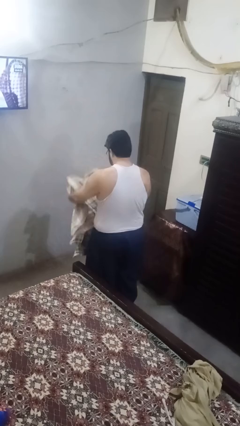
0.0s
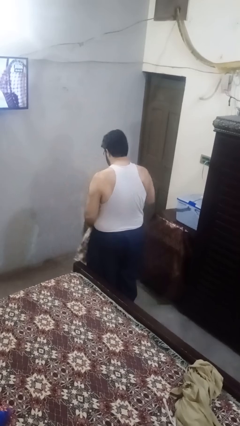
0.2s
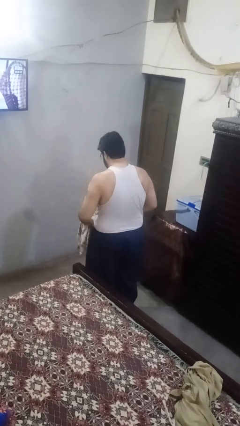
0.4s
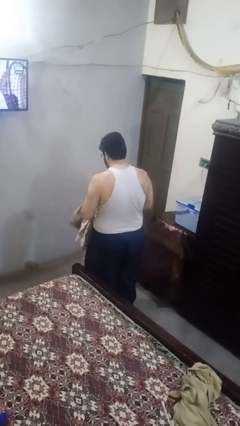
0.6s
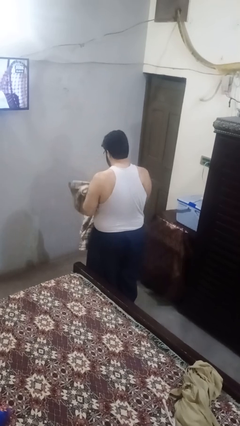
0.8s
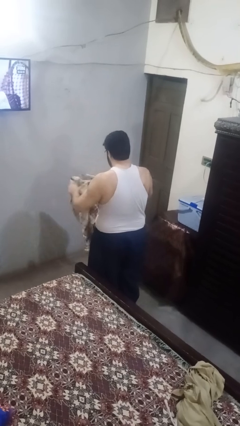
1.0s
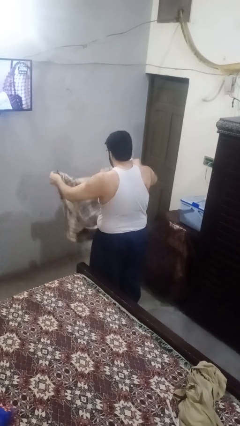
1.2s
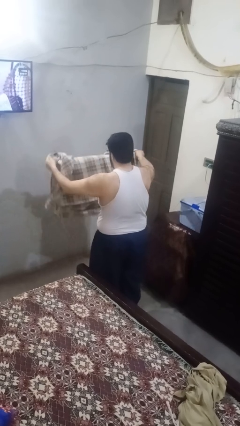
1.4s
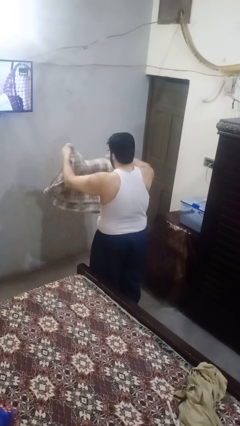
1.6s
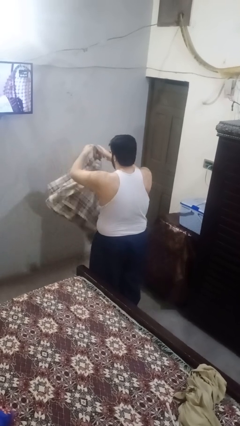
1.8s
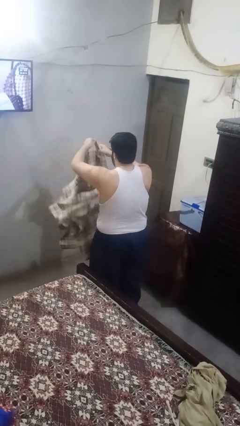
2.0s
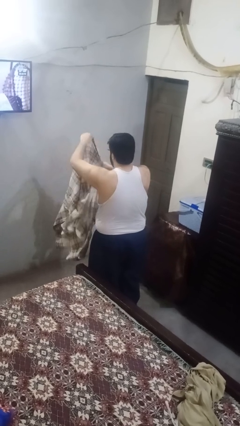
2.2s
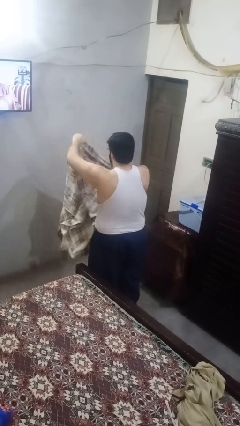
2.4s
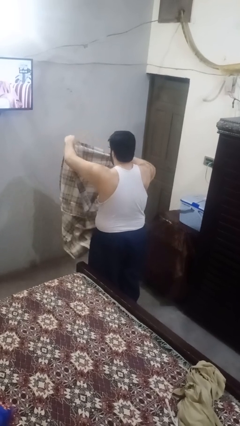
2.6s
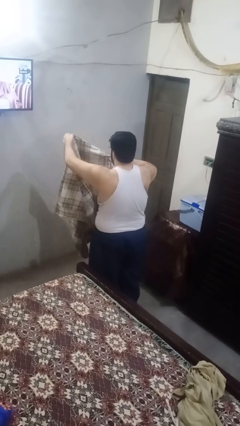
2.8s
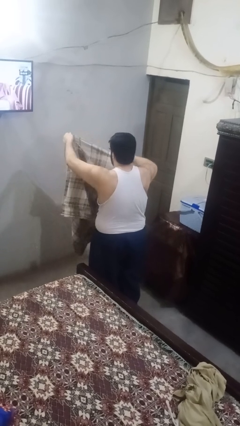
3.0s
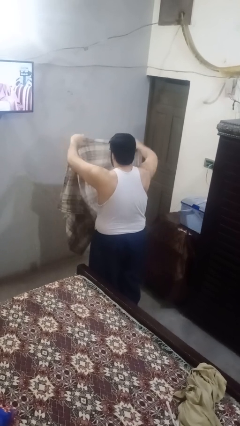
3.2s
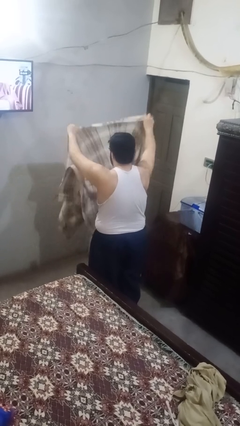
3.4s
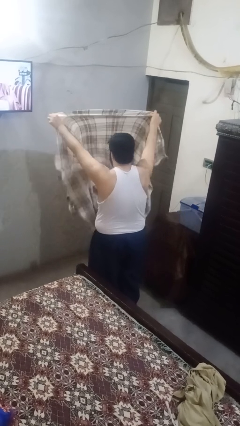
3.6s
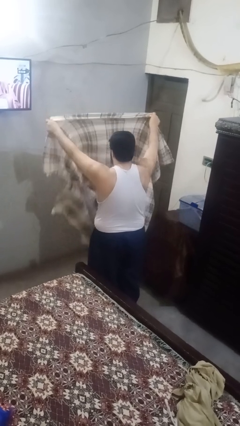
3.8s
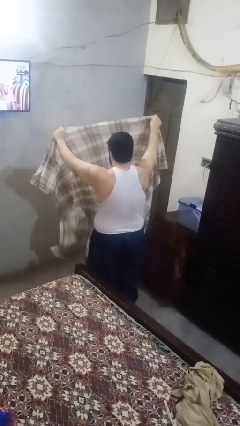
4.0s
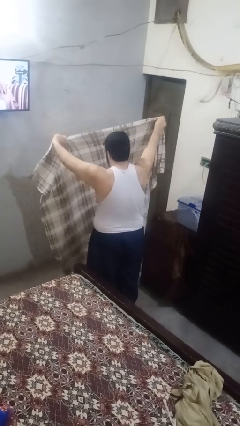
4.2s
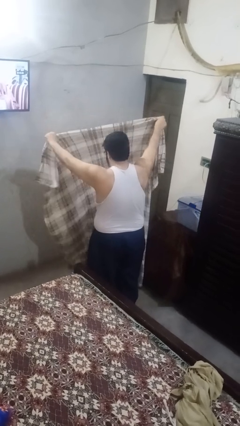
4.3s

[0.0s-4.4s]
person unfolds blanket

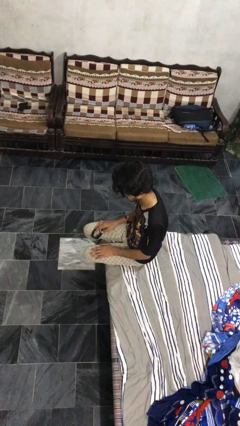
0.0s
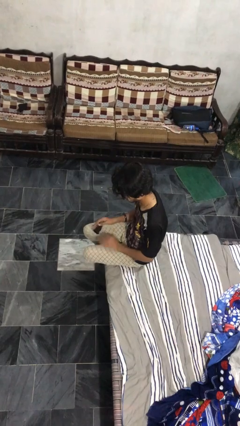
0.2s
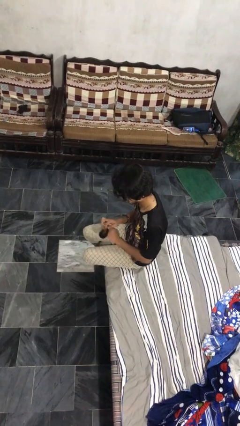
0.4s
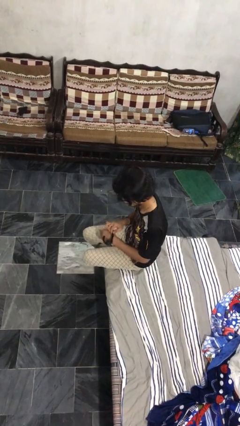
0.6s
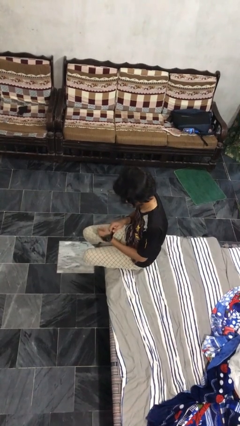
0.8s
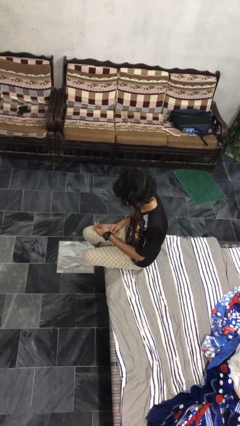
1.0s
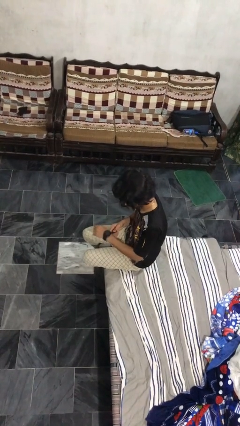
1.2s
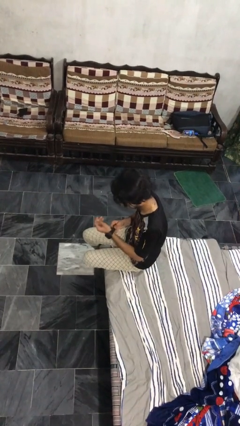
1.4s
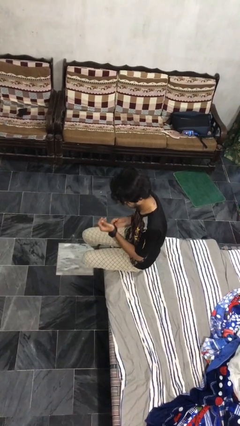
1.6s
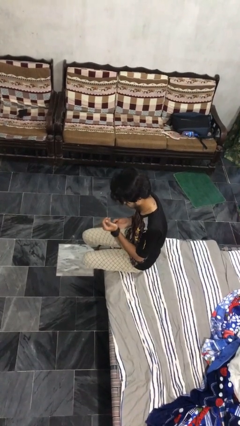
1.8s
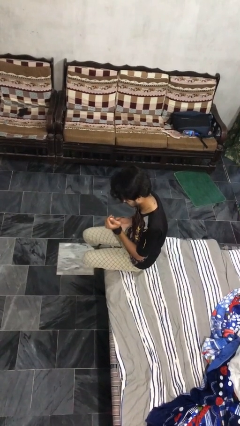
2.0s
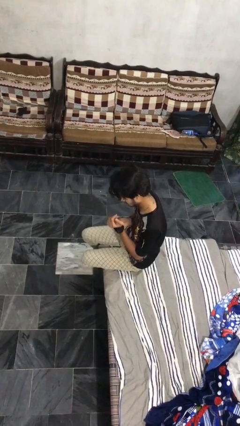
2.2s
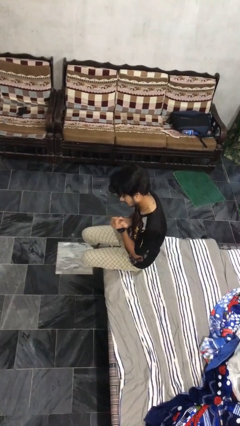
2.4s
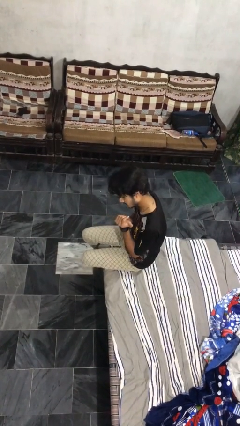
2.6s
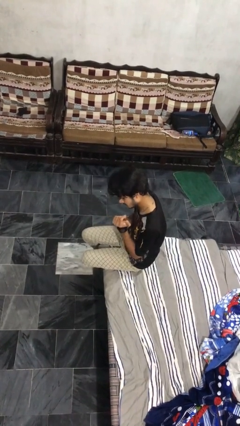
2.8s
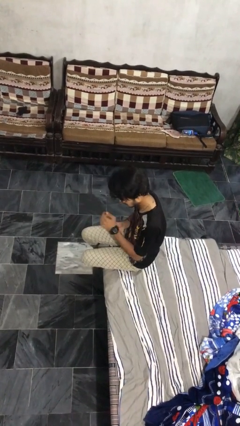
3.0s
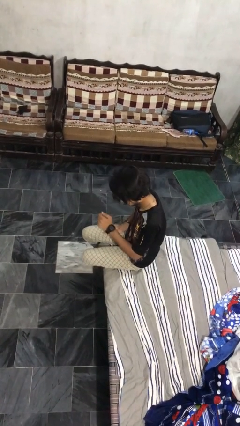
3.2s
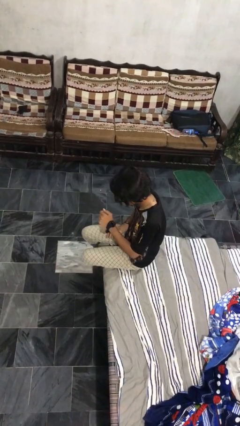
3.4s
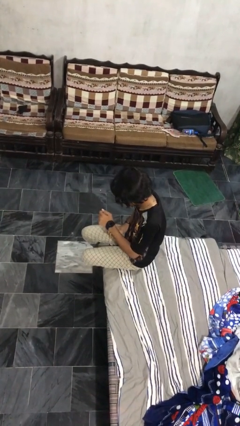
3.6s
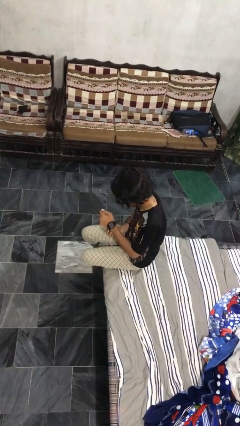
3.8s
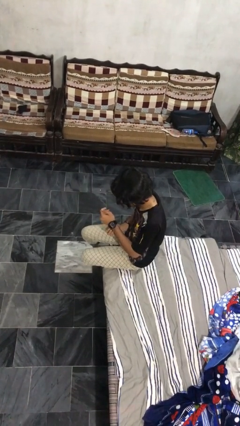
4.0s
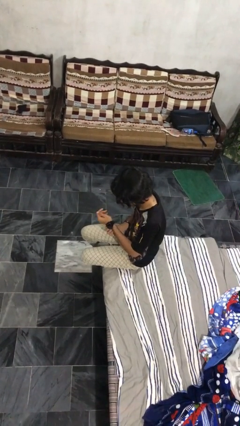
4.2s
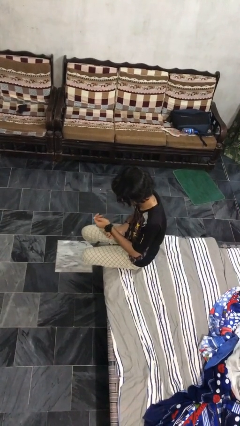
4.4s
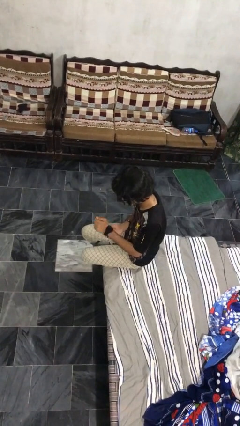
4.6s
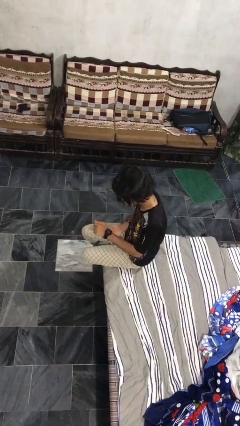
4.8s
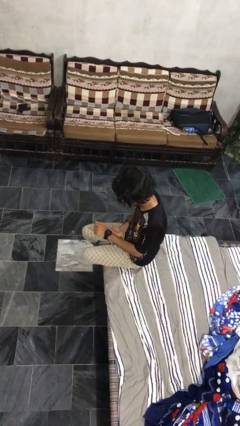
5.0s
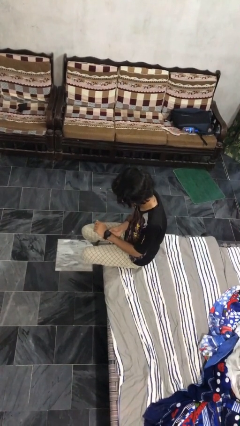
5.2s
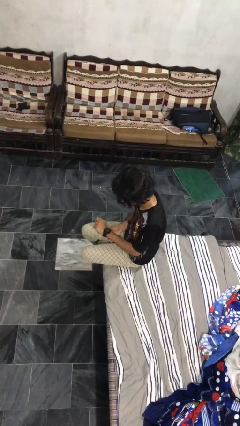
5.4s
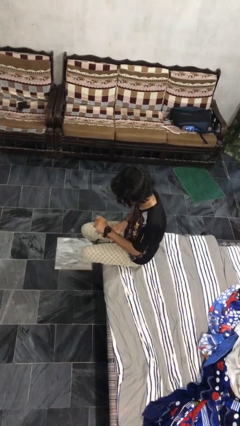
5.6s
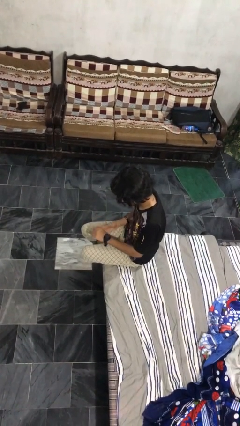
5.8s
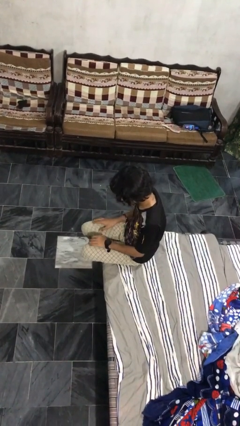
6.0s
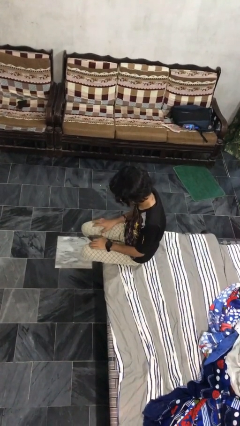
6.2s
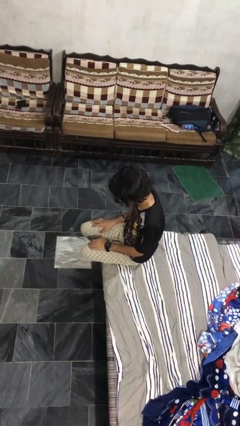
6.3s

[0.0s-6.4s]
person puts on wristwatch

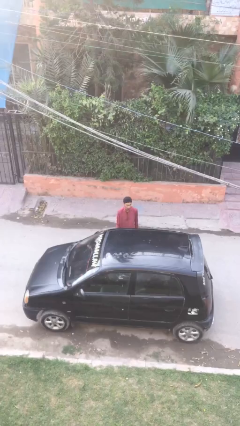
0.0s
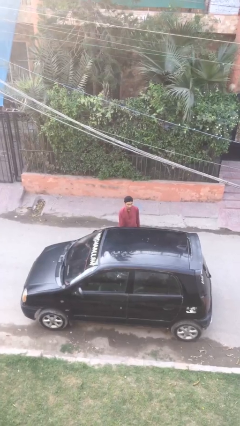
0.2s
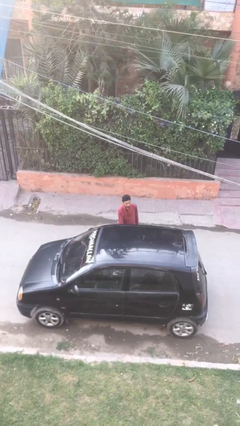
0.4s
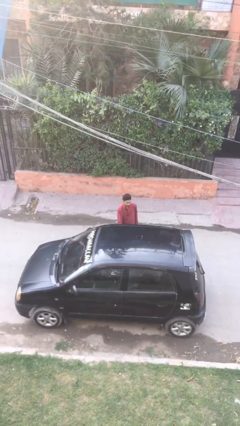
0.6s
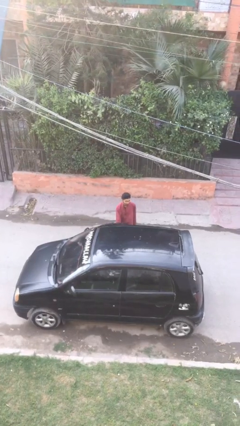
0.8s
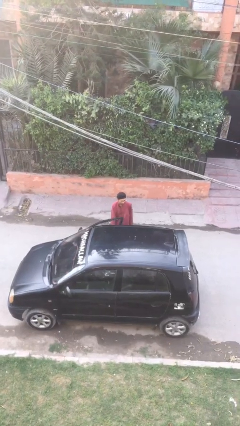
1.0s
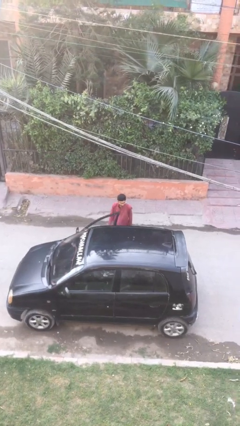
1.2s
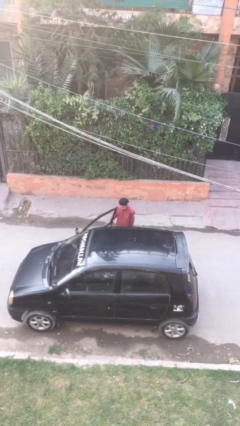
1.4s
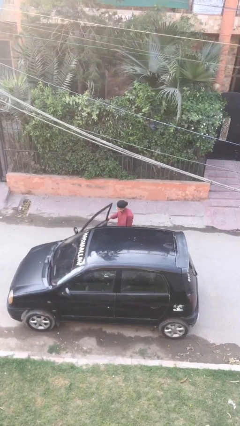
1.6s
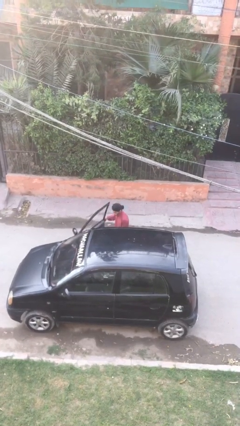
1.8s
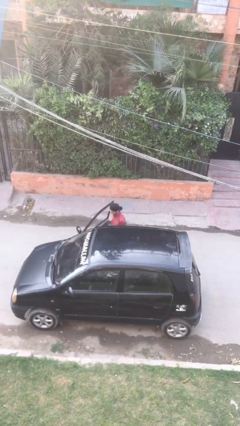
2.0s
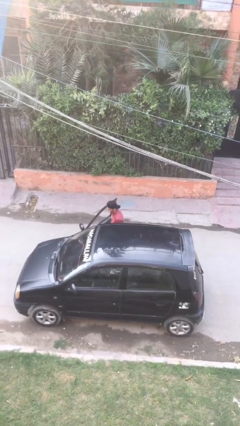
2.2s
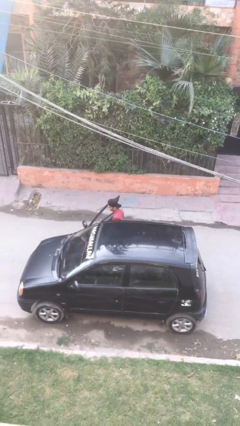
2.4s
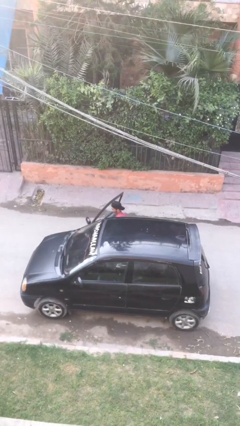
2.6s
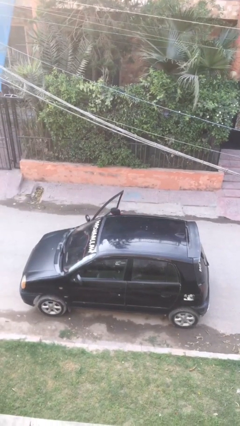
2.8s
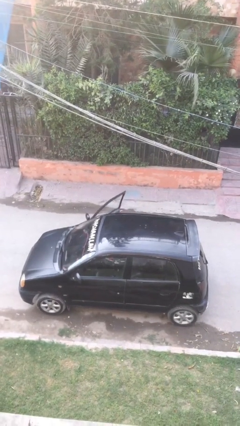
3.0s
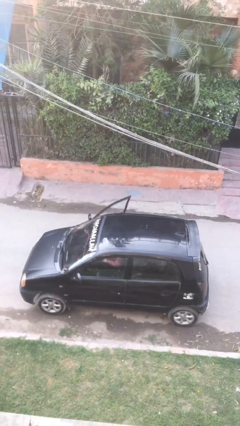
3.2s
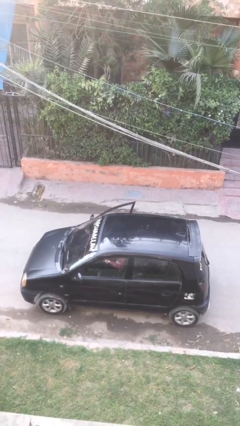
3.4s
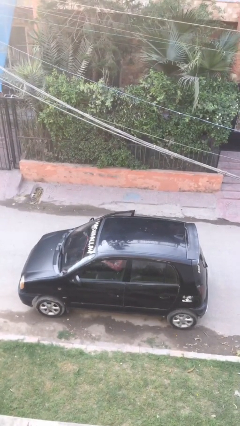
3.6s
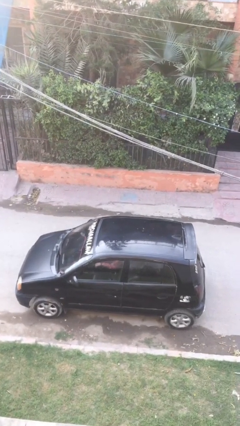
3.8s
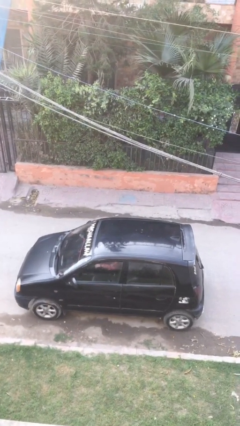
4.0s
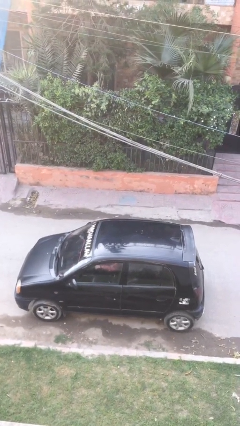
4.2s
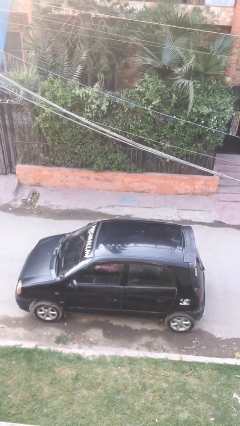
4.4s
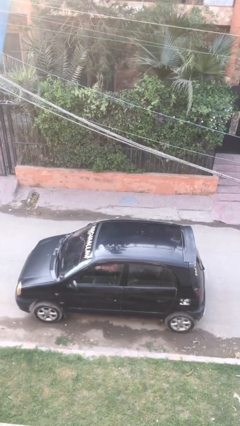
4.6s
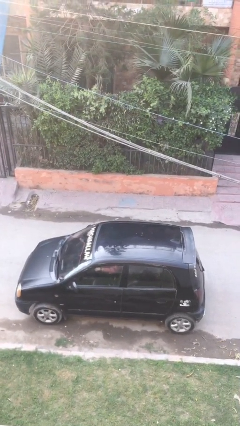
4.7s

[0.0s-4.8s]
person enters car

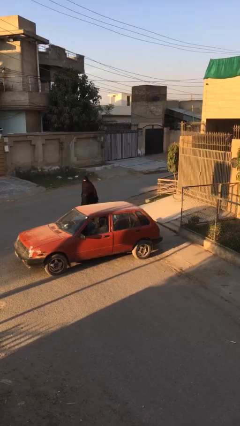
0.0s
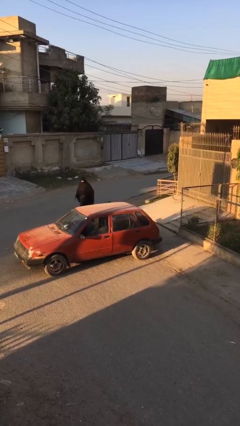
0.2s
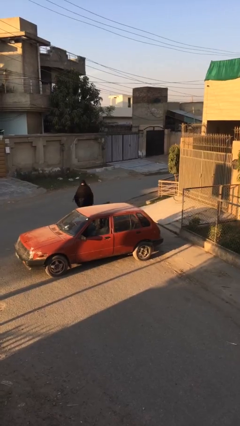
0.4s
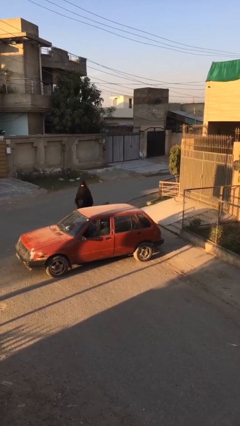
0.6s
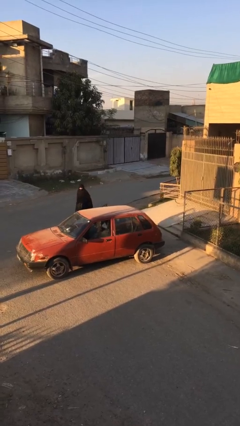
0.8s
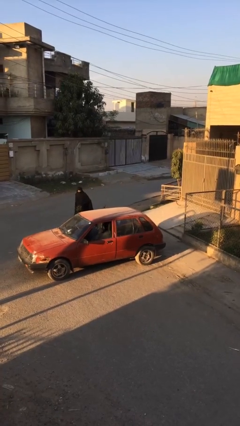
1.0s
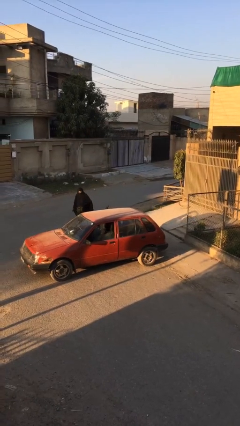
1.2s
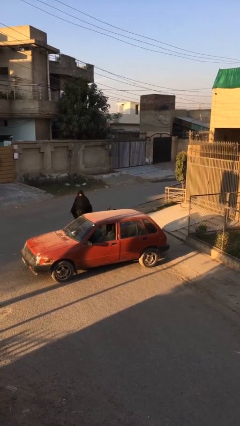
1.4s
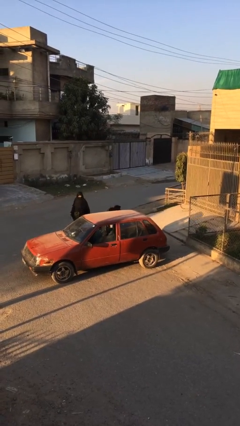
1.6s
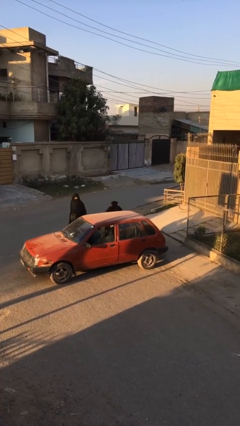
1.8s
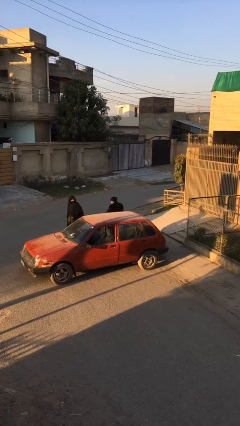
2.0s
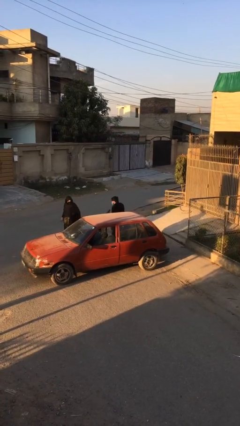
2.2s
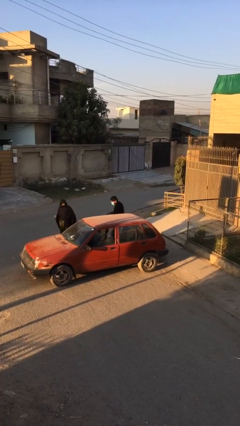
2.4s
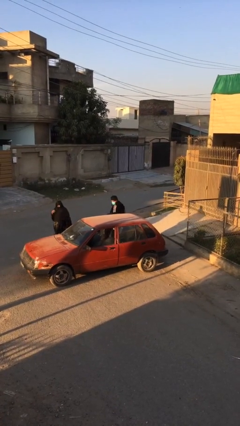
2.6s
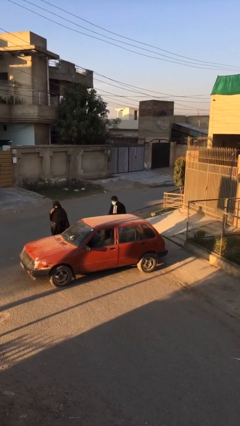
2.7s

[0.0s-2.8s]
person exits car
